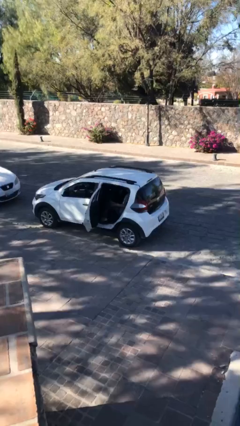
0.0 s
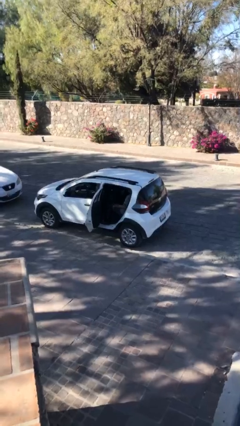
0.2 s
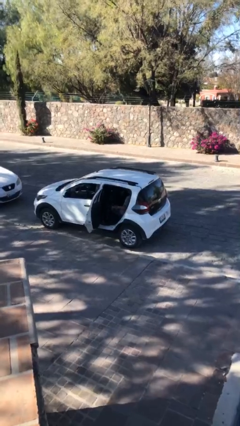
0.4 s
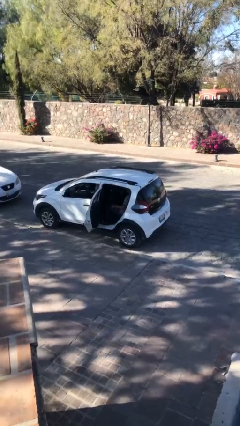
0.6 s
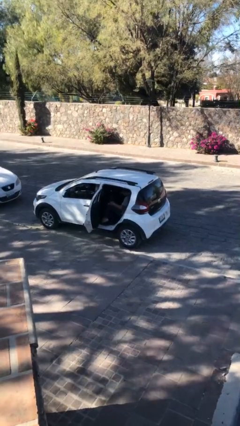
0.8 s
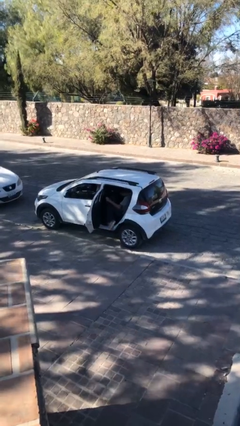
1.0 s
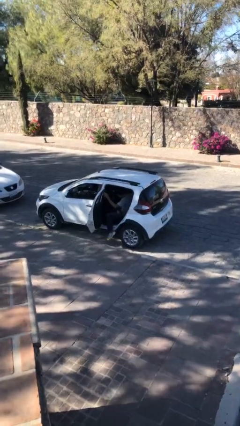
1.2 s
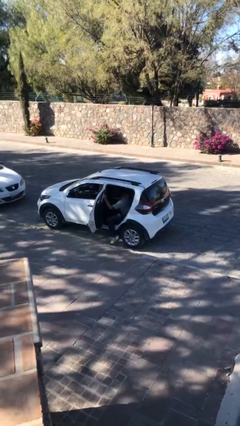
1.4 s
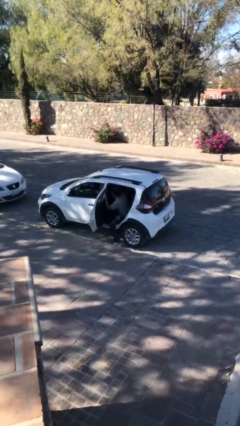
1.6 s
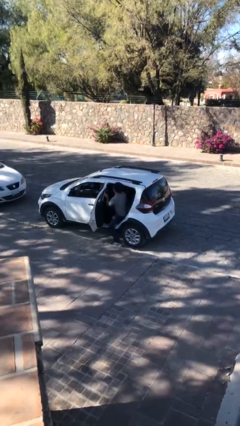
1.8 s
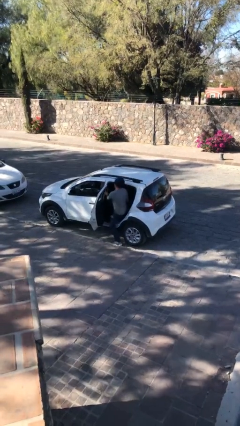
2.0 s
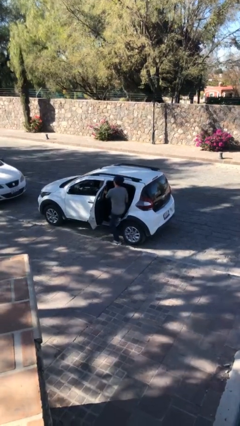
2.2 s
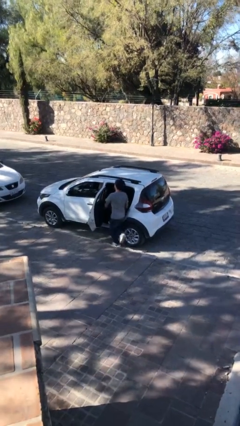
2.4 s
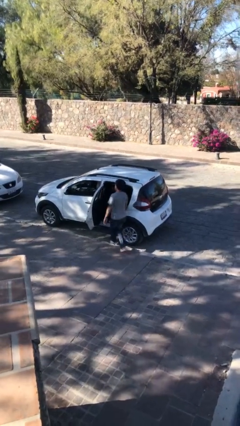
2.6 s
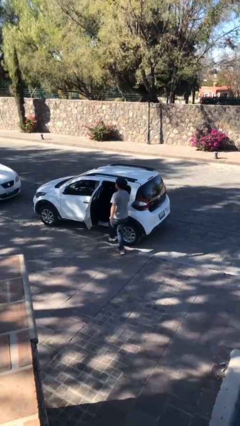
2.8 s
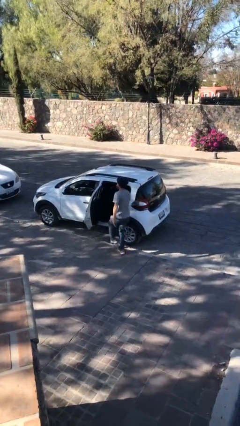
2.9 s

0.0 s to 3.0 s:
person exits car

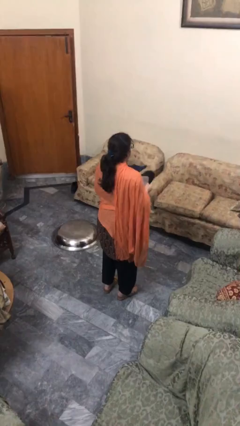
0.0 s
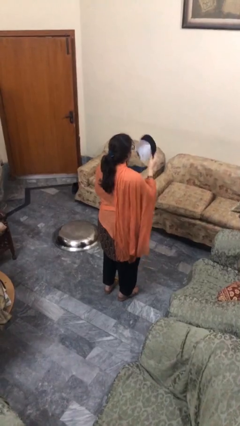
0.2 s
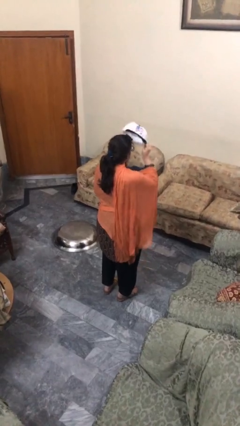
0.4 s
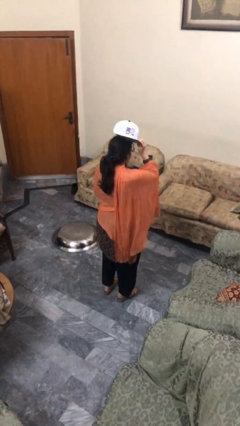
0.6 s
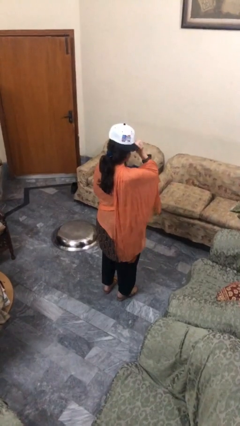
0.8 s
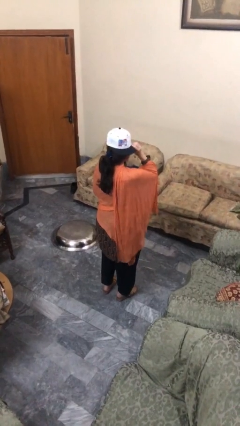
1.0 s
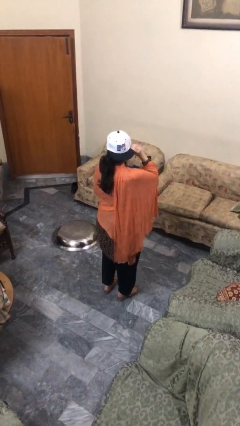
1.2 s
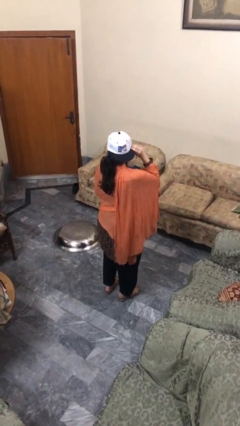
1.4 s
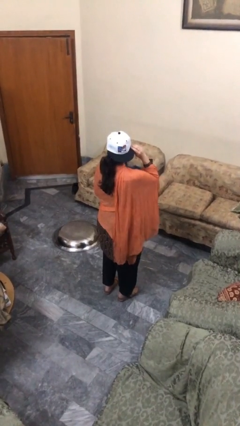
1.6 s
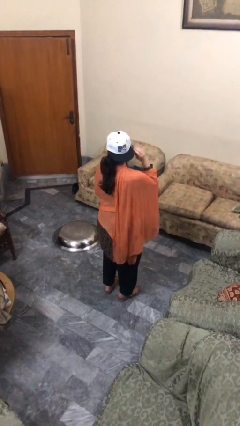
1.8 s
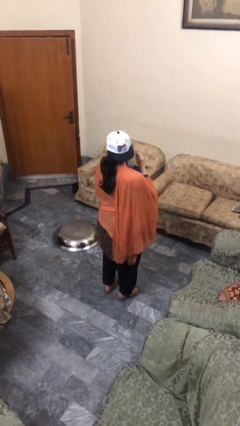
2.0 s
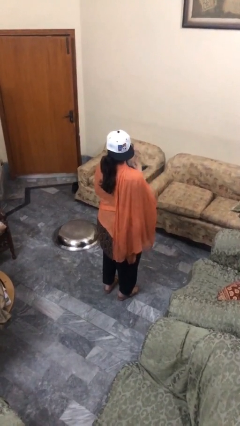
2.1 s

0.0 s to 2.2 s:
person puts on hat

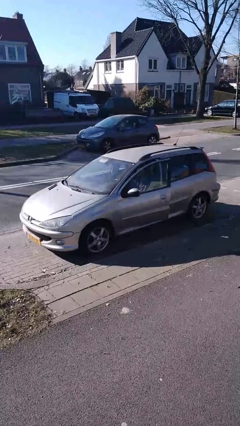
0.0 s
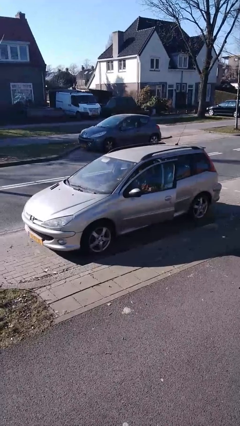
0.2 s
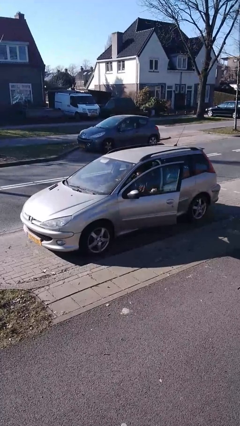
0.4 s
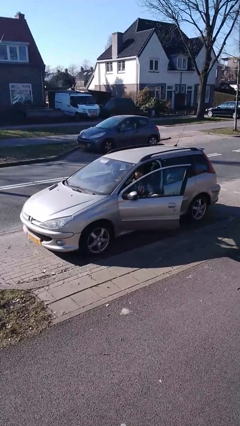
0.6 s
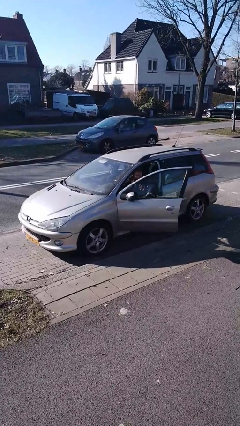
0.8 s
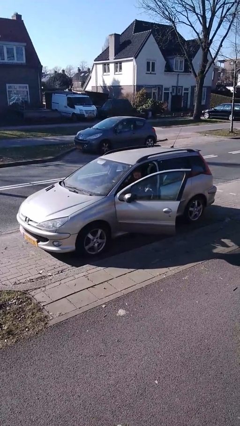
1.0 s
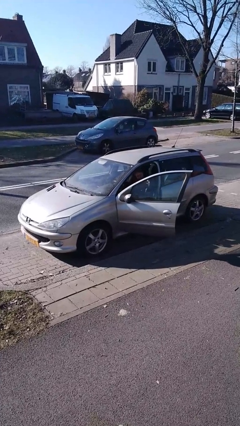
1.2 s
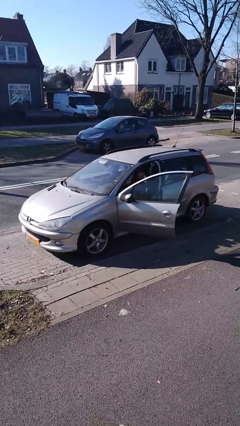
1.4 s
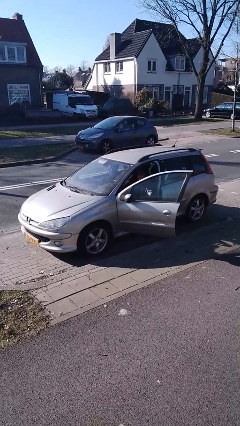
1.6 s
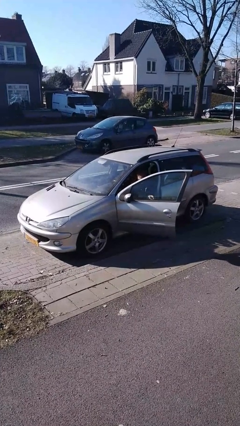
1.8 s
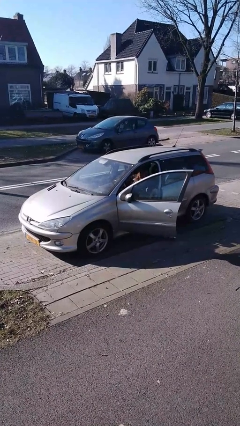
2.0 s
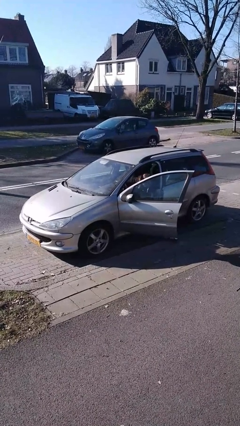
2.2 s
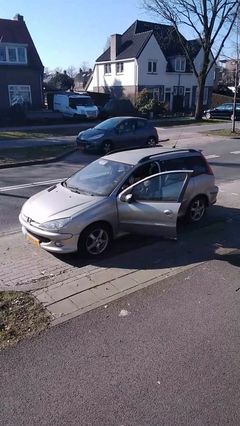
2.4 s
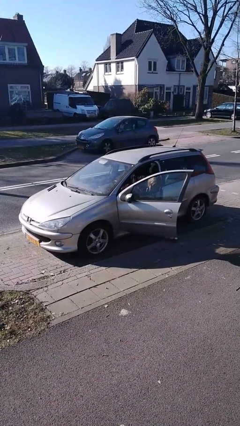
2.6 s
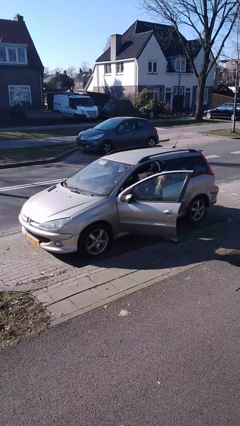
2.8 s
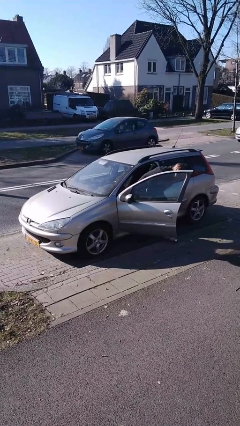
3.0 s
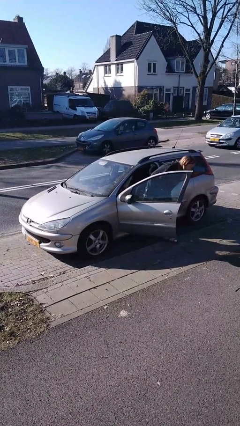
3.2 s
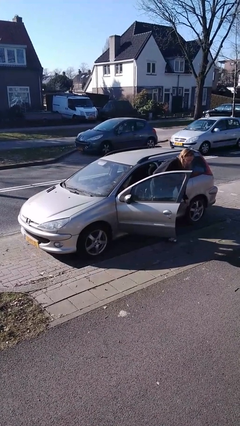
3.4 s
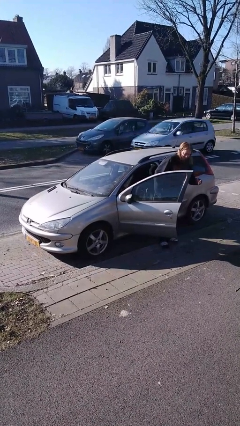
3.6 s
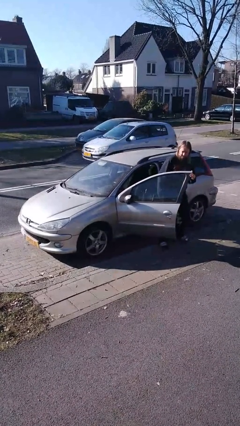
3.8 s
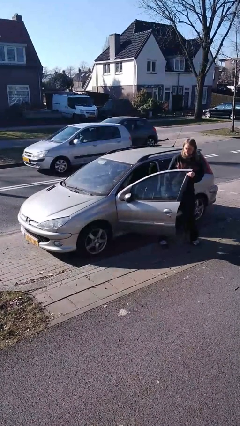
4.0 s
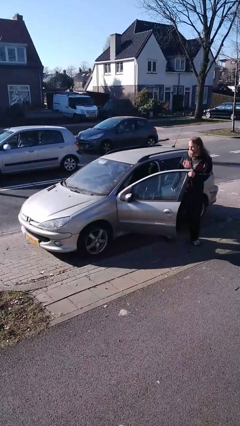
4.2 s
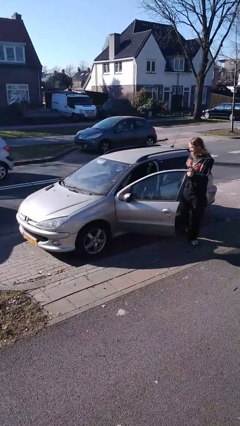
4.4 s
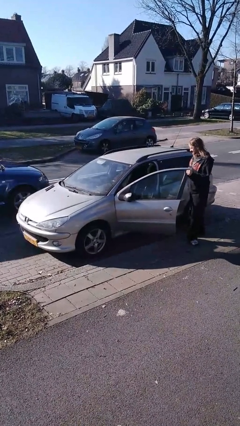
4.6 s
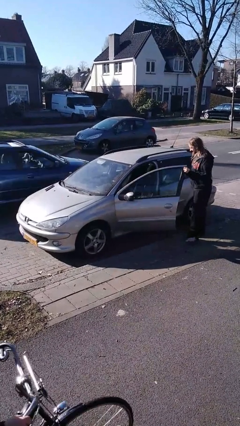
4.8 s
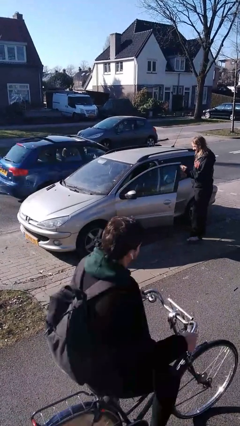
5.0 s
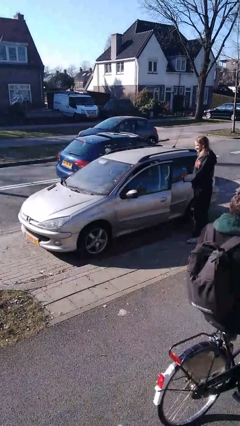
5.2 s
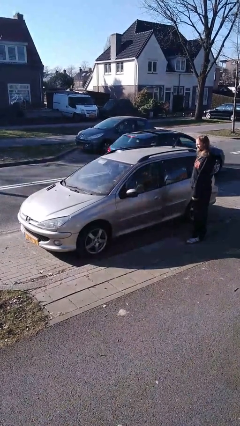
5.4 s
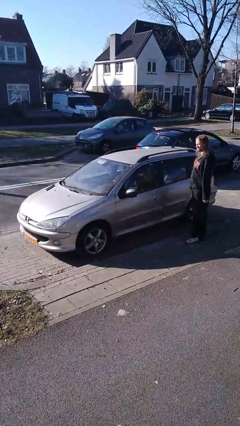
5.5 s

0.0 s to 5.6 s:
car drops off person

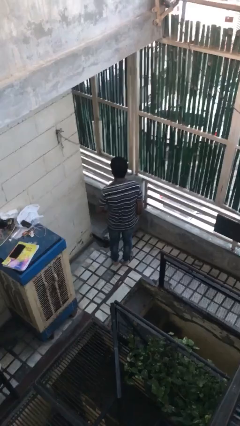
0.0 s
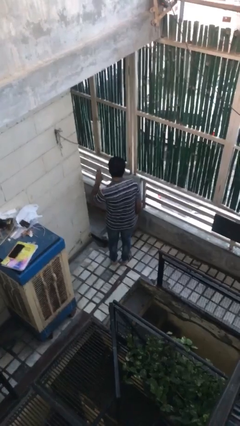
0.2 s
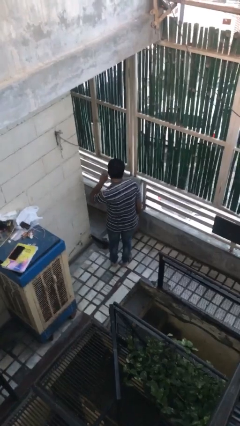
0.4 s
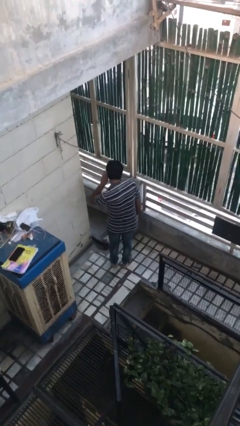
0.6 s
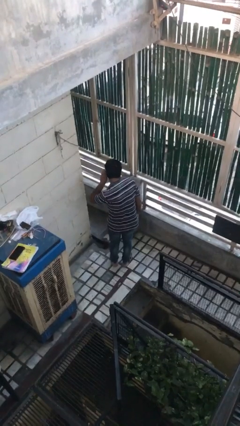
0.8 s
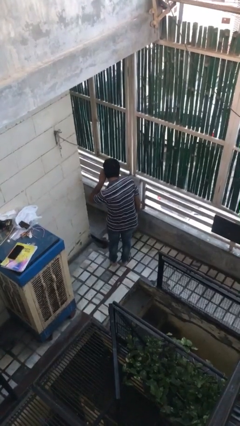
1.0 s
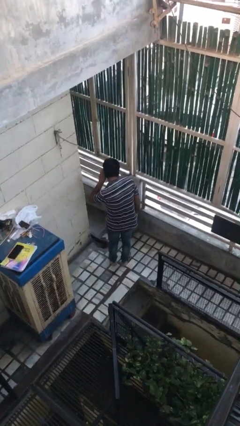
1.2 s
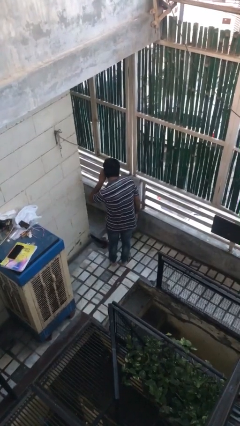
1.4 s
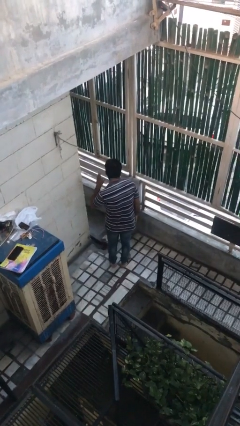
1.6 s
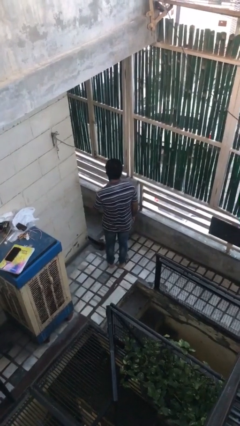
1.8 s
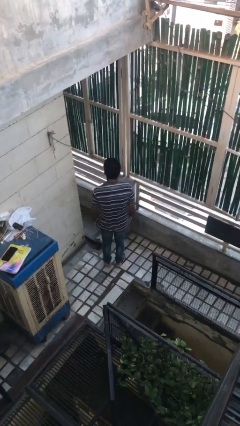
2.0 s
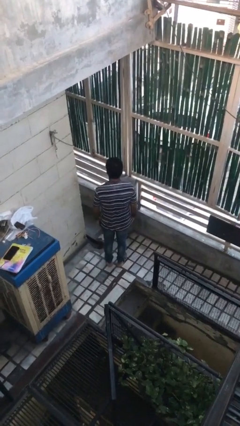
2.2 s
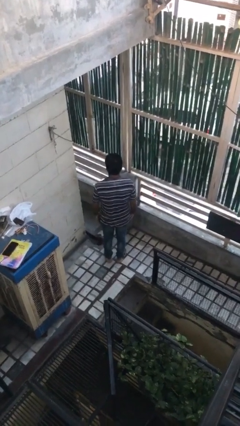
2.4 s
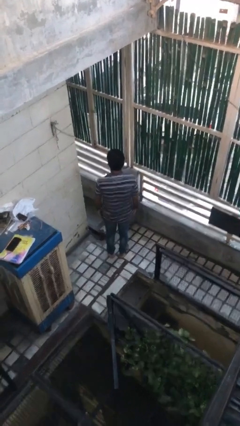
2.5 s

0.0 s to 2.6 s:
person gestures listen closely

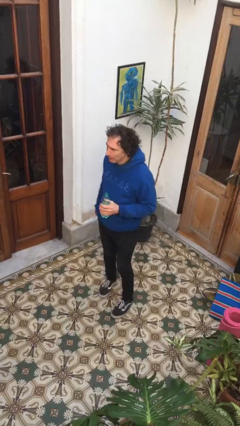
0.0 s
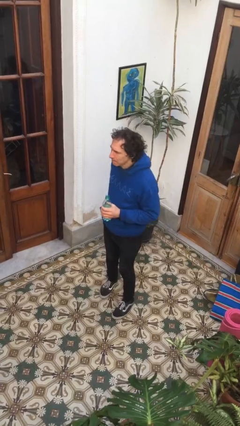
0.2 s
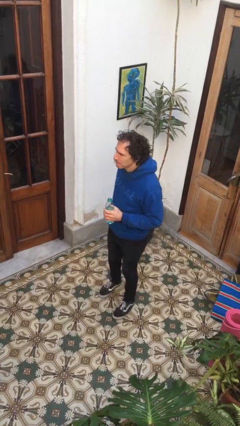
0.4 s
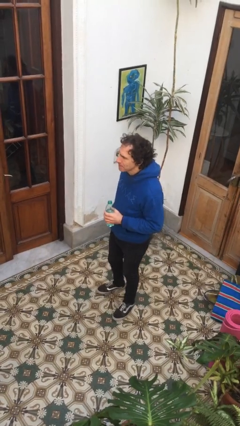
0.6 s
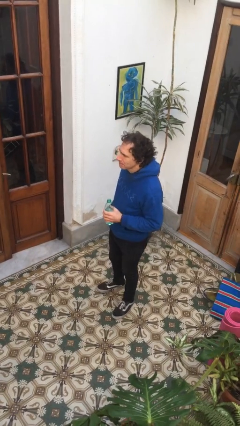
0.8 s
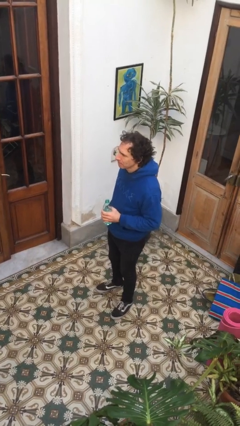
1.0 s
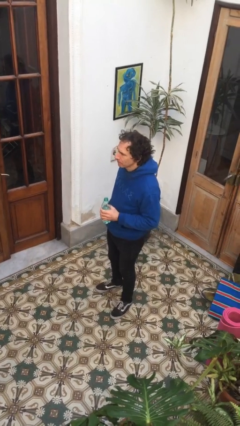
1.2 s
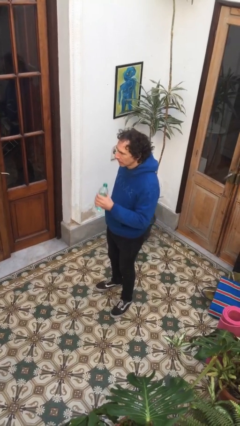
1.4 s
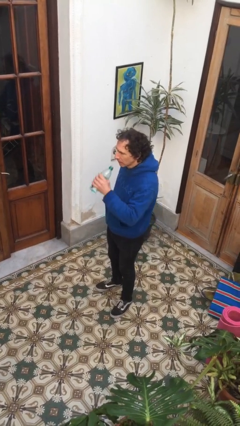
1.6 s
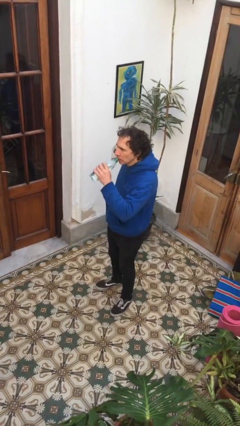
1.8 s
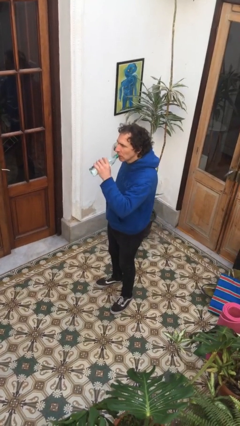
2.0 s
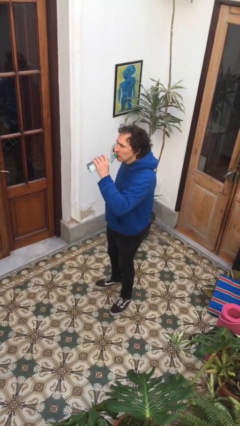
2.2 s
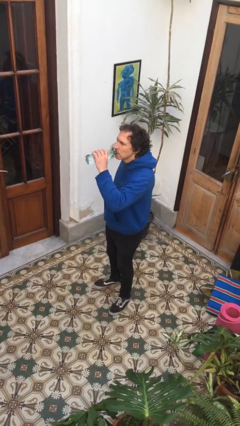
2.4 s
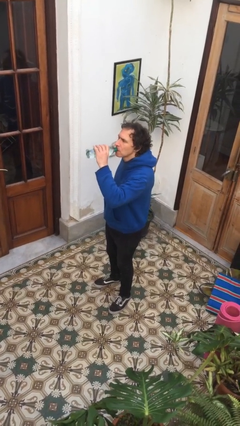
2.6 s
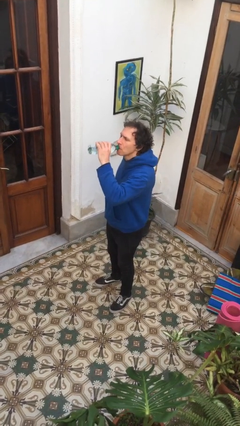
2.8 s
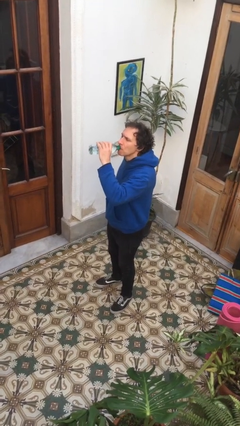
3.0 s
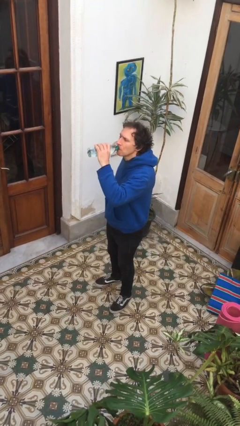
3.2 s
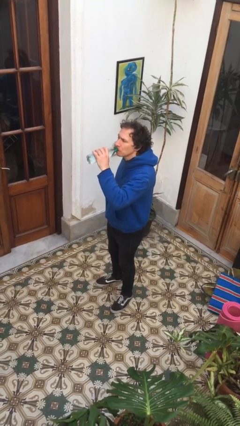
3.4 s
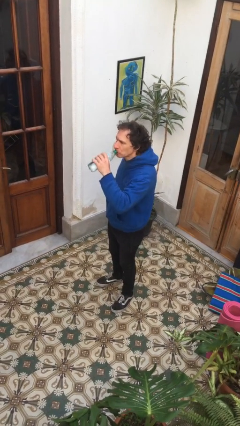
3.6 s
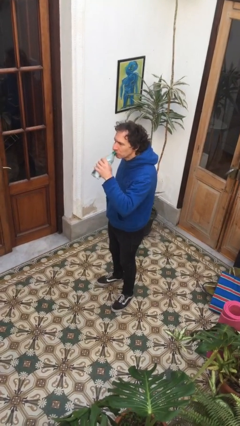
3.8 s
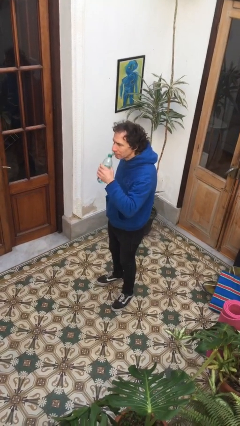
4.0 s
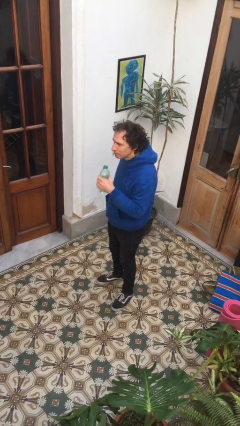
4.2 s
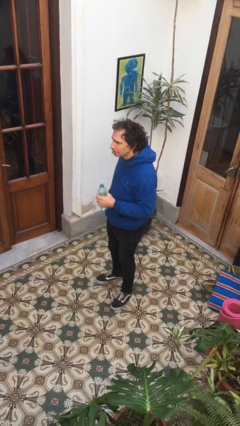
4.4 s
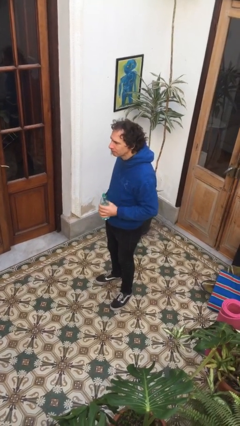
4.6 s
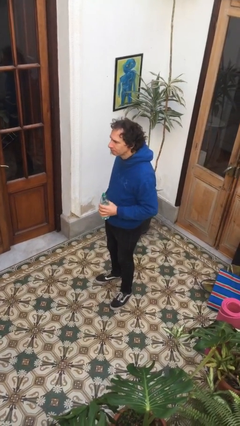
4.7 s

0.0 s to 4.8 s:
person drinks from bottle
